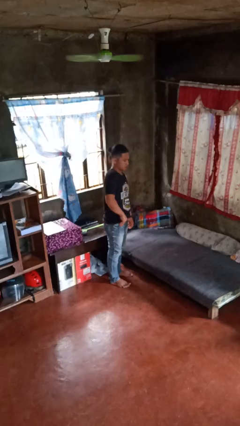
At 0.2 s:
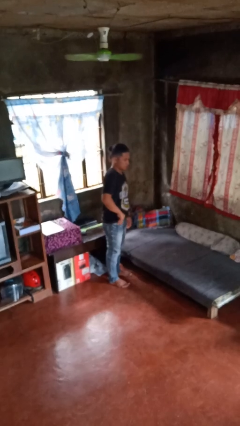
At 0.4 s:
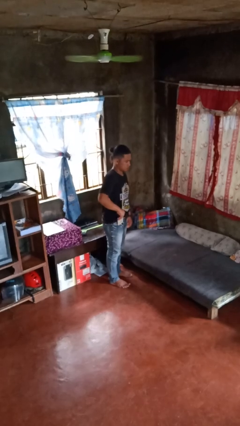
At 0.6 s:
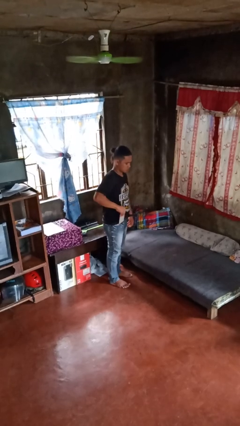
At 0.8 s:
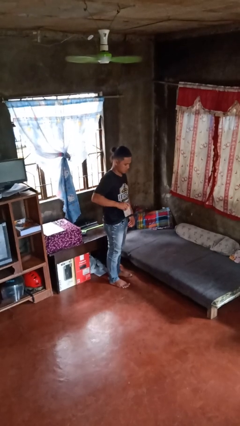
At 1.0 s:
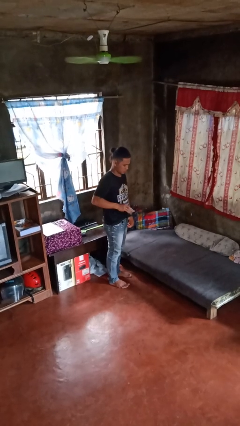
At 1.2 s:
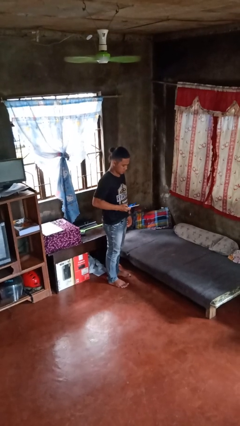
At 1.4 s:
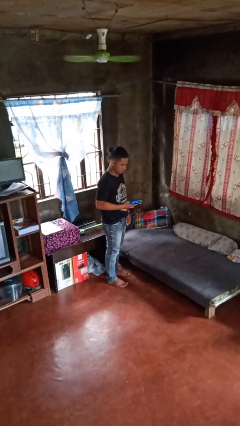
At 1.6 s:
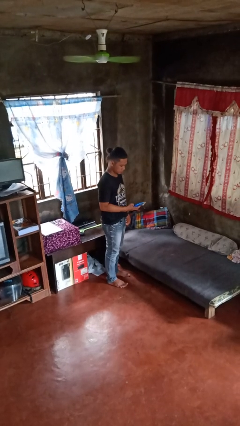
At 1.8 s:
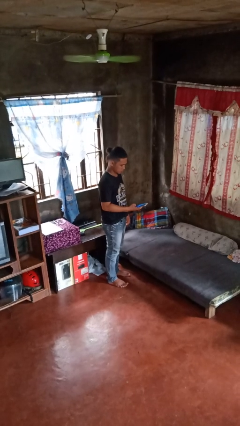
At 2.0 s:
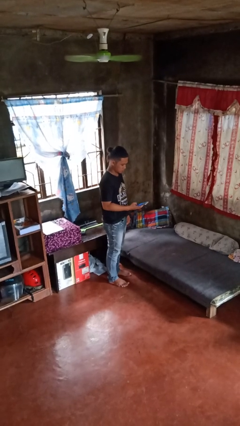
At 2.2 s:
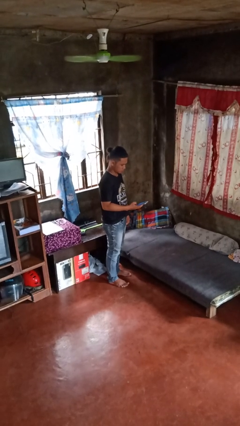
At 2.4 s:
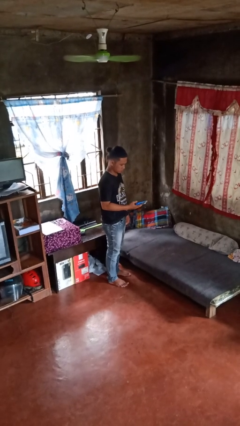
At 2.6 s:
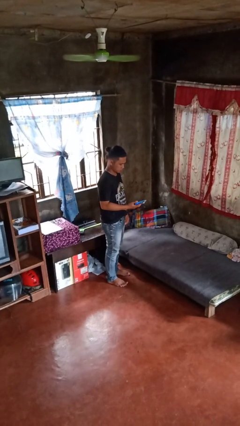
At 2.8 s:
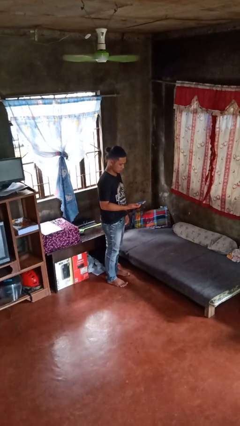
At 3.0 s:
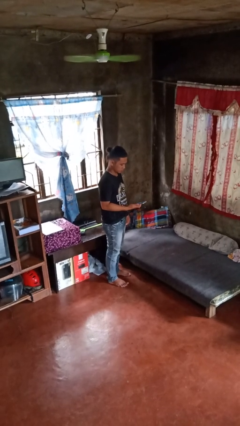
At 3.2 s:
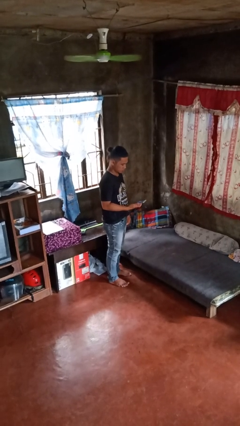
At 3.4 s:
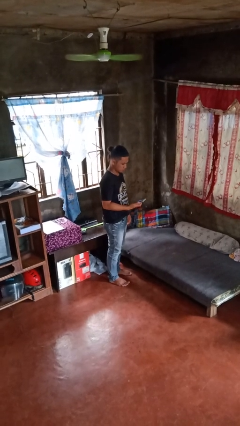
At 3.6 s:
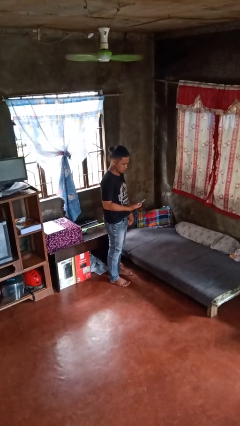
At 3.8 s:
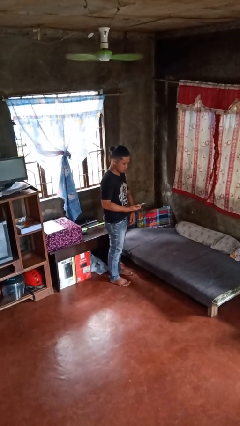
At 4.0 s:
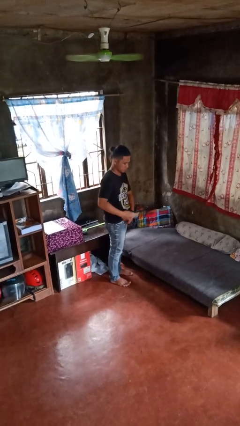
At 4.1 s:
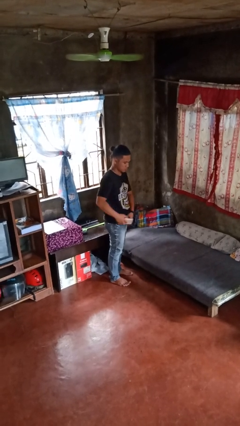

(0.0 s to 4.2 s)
person takes phone from pocket

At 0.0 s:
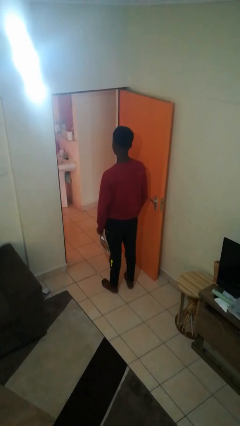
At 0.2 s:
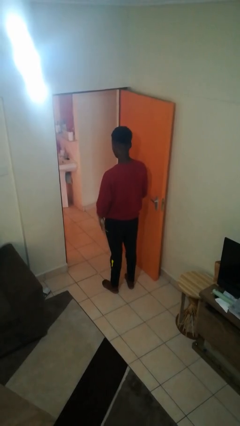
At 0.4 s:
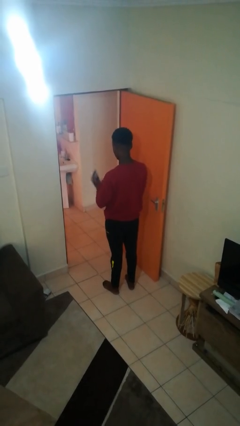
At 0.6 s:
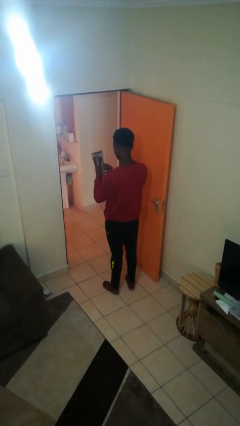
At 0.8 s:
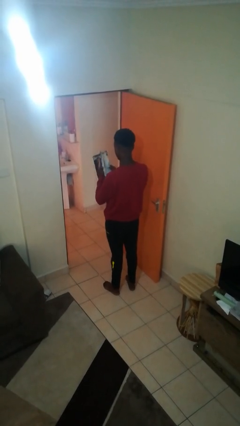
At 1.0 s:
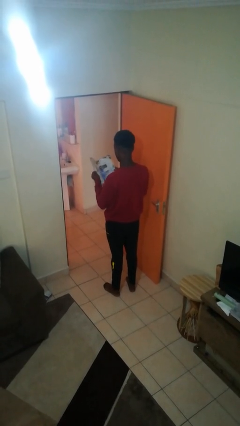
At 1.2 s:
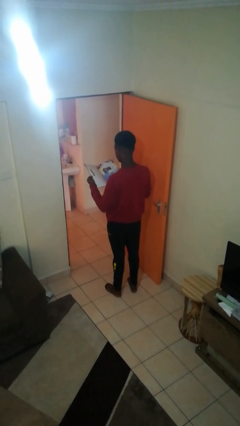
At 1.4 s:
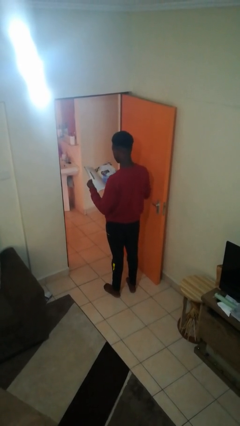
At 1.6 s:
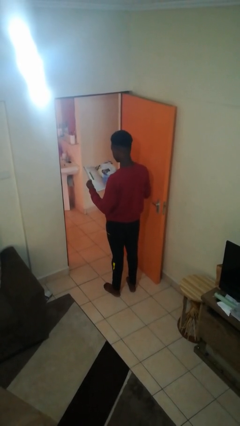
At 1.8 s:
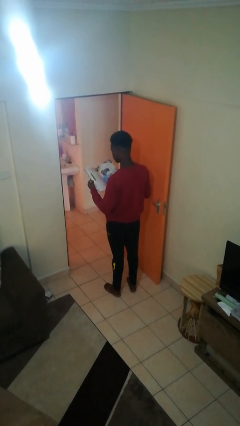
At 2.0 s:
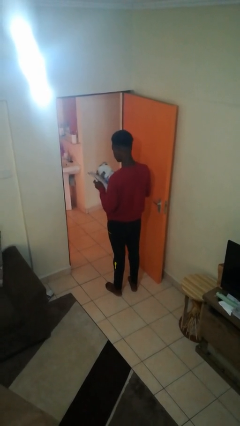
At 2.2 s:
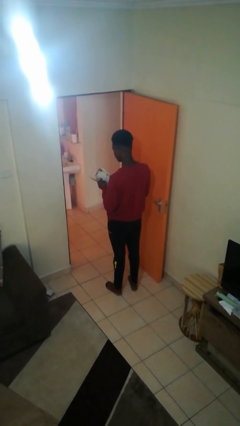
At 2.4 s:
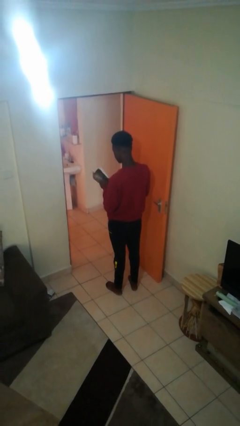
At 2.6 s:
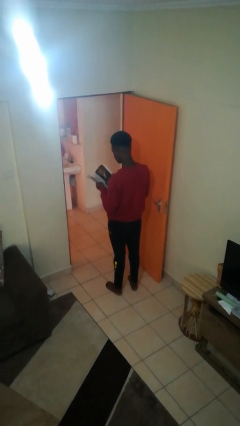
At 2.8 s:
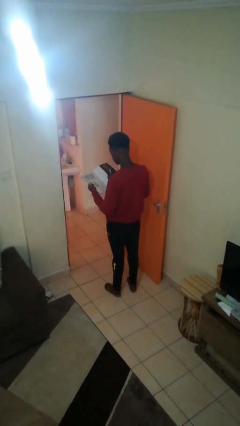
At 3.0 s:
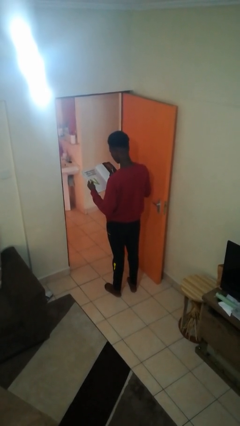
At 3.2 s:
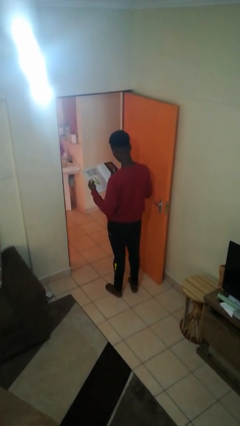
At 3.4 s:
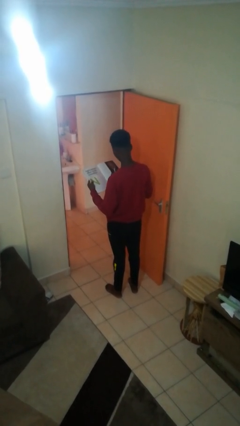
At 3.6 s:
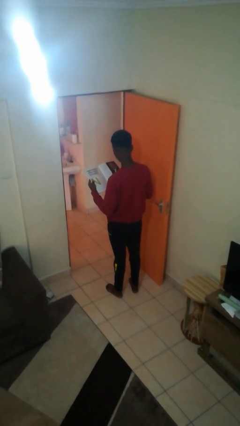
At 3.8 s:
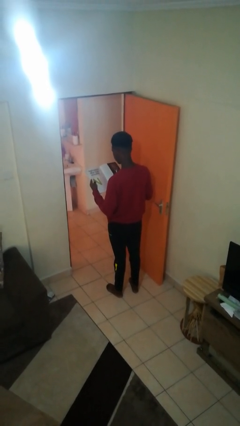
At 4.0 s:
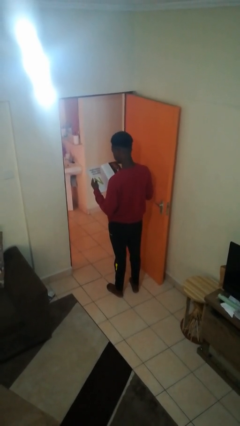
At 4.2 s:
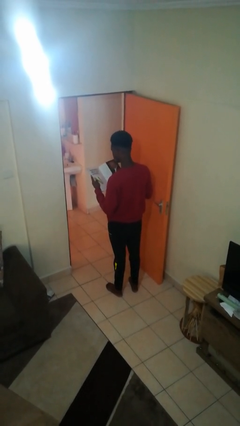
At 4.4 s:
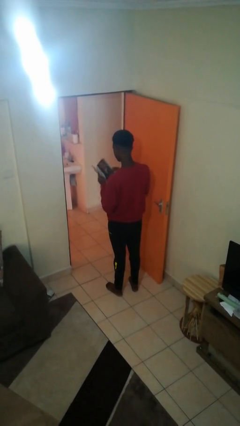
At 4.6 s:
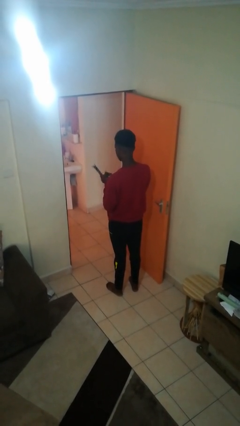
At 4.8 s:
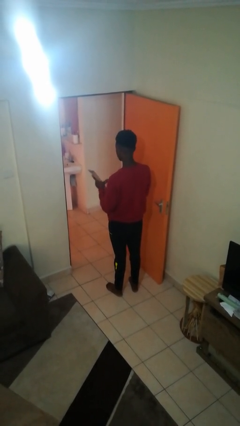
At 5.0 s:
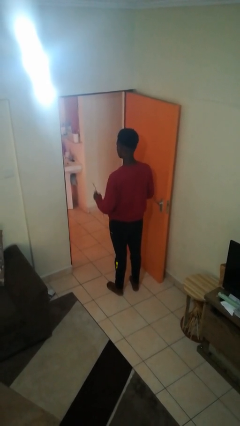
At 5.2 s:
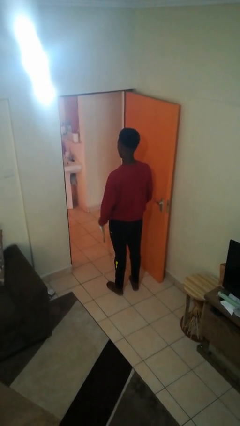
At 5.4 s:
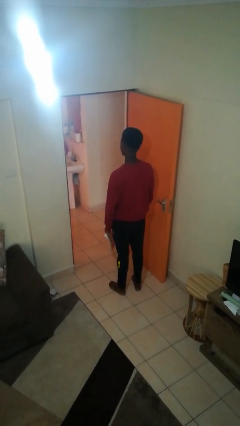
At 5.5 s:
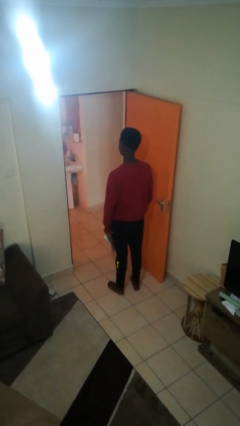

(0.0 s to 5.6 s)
person reads magazine

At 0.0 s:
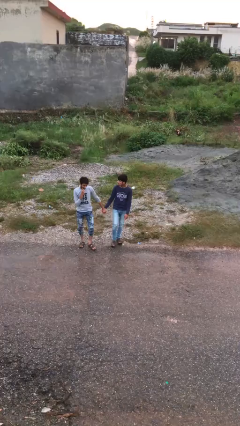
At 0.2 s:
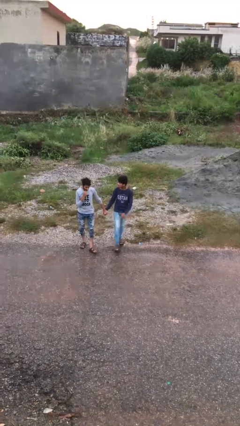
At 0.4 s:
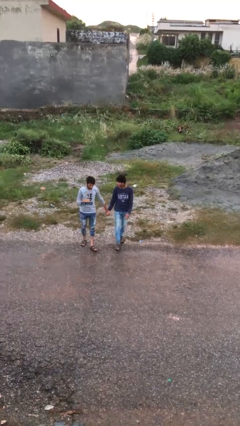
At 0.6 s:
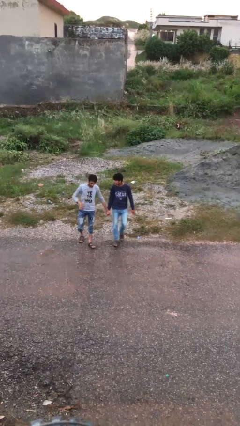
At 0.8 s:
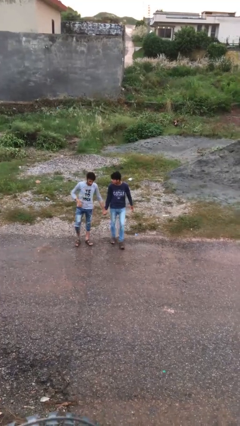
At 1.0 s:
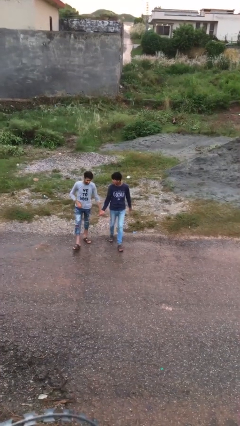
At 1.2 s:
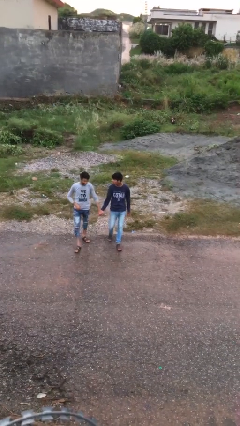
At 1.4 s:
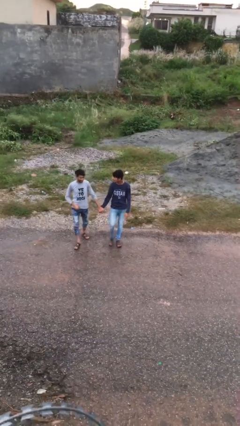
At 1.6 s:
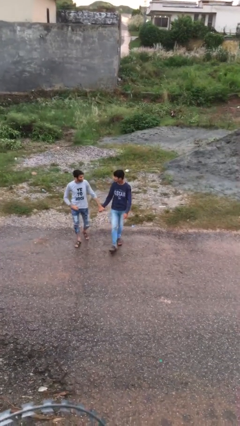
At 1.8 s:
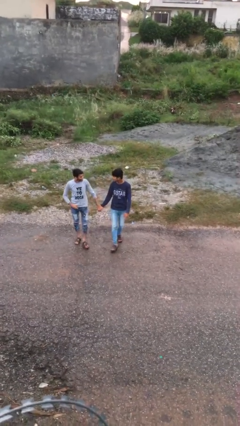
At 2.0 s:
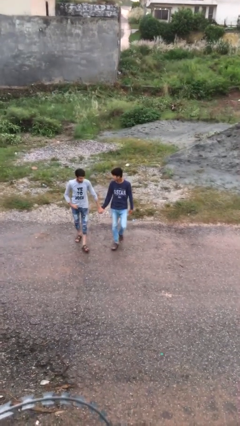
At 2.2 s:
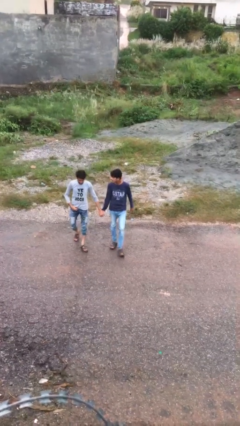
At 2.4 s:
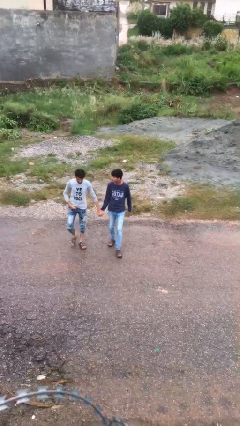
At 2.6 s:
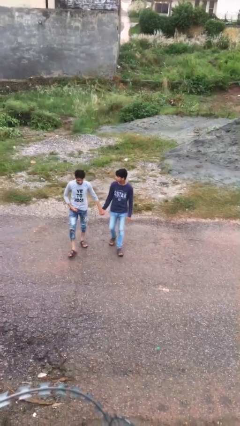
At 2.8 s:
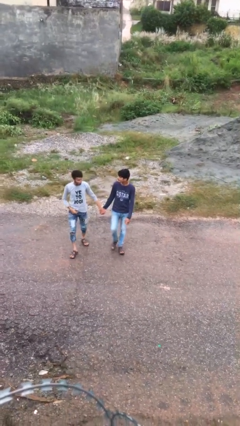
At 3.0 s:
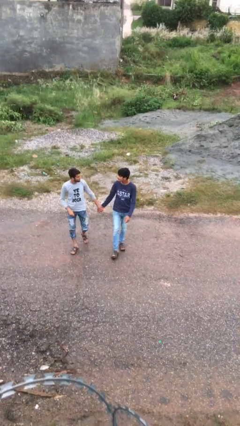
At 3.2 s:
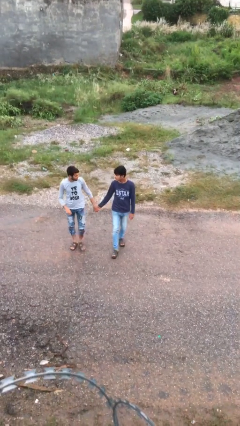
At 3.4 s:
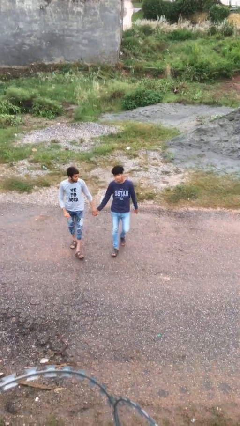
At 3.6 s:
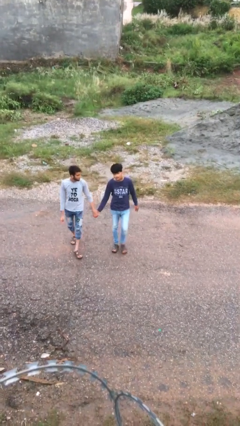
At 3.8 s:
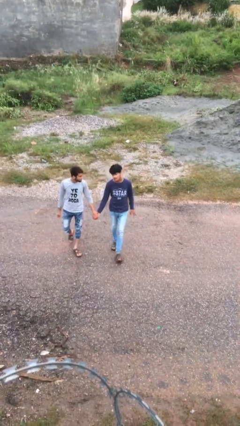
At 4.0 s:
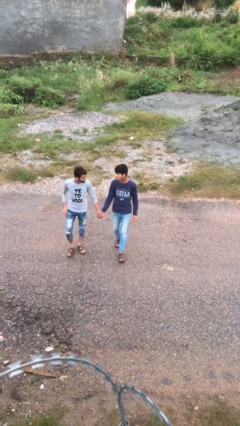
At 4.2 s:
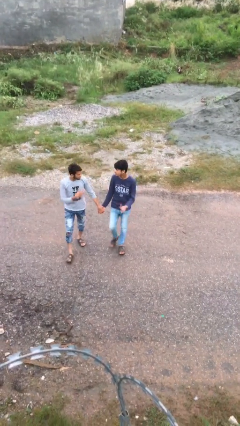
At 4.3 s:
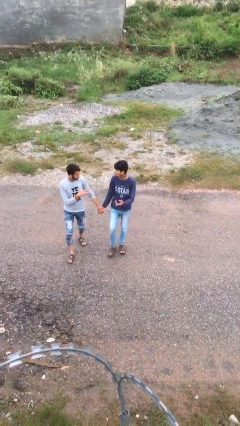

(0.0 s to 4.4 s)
person holds hand

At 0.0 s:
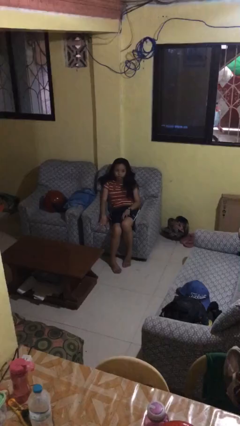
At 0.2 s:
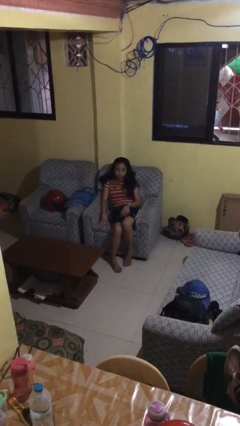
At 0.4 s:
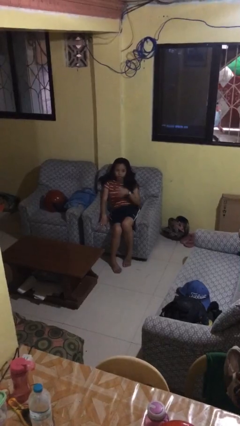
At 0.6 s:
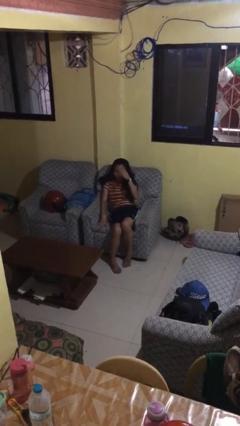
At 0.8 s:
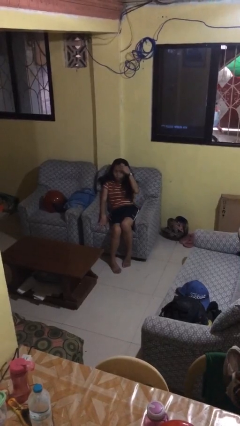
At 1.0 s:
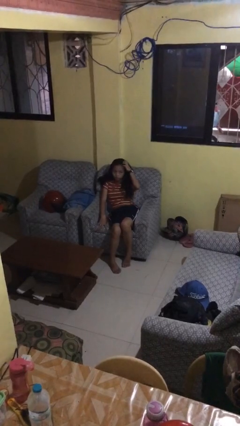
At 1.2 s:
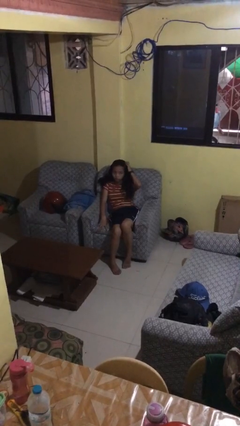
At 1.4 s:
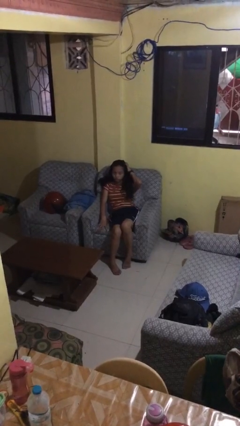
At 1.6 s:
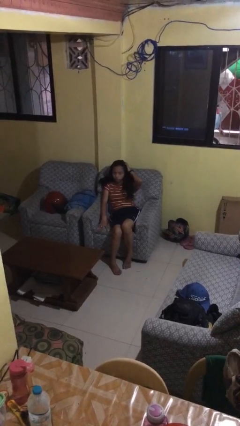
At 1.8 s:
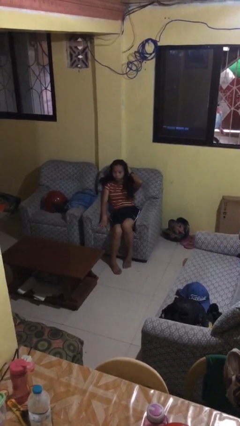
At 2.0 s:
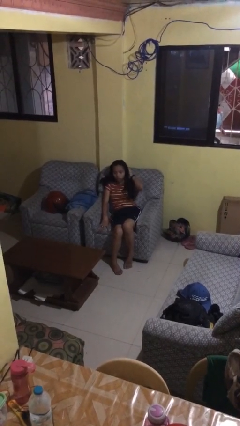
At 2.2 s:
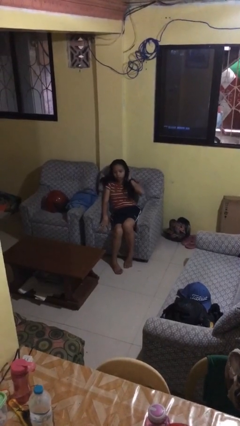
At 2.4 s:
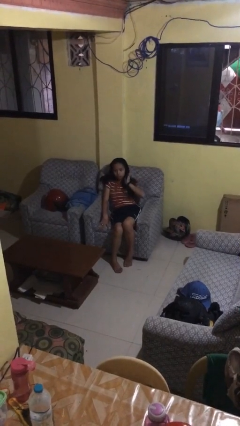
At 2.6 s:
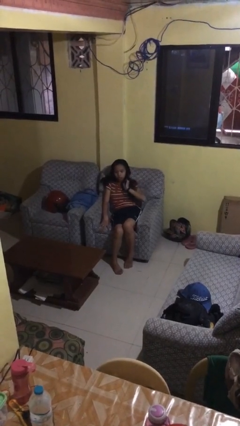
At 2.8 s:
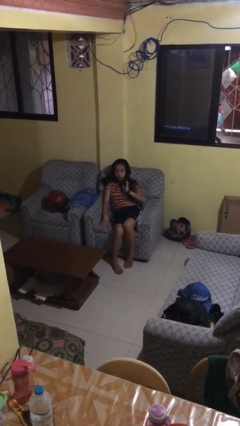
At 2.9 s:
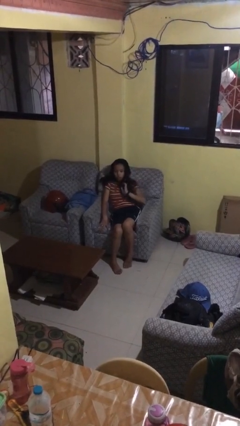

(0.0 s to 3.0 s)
person strokes hair

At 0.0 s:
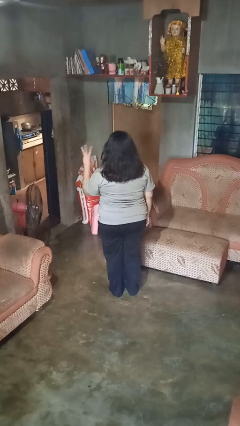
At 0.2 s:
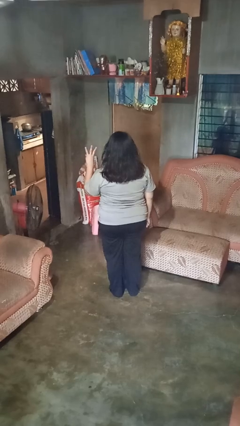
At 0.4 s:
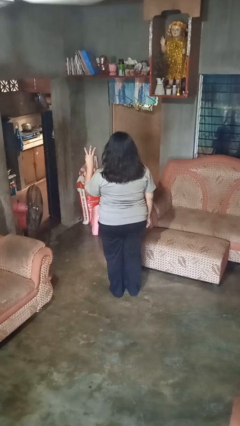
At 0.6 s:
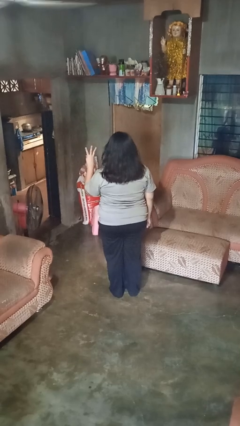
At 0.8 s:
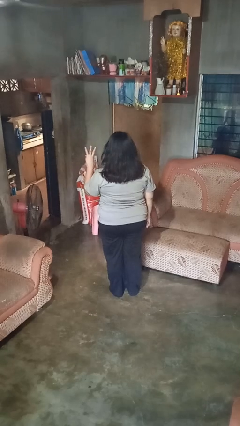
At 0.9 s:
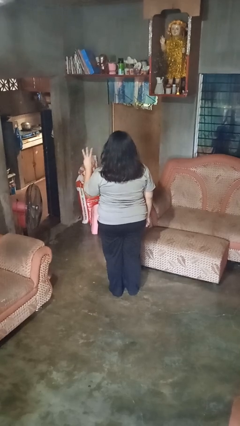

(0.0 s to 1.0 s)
person gestures number three
